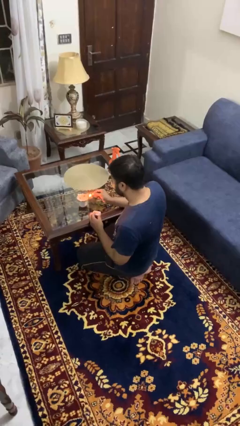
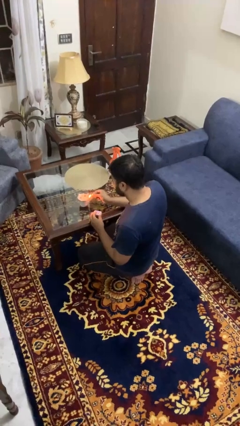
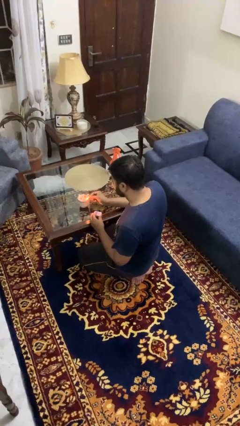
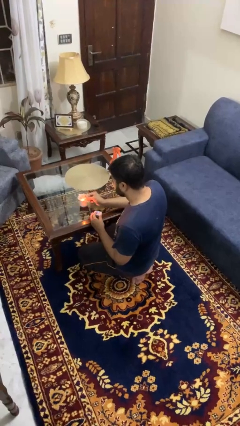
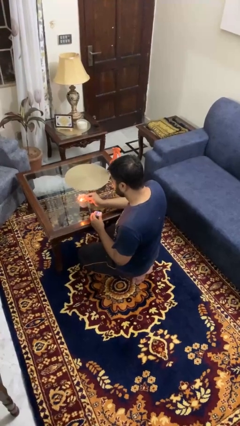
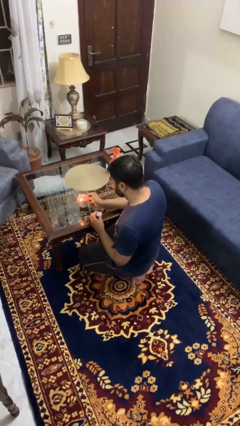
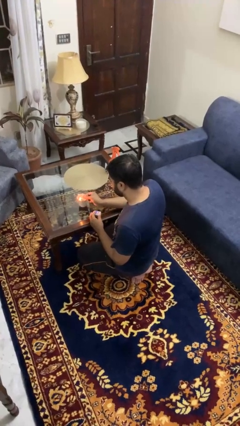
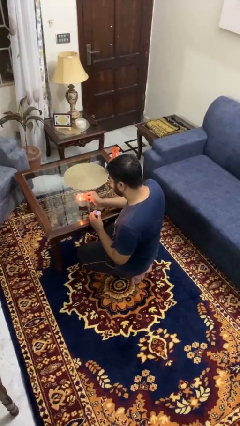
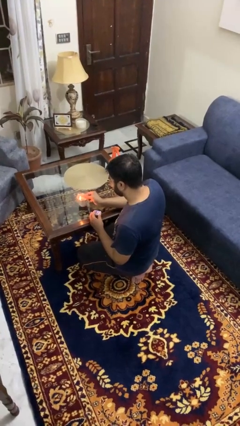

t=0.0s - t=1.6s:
person lights candle

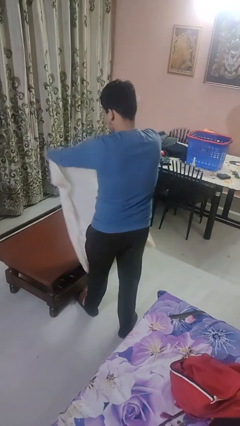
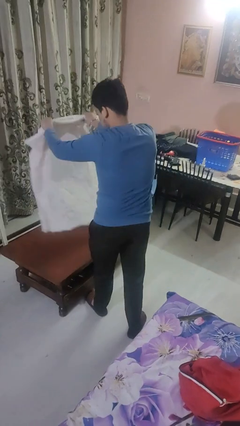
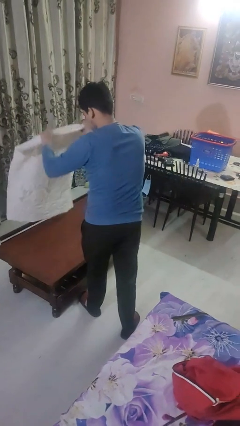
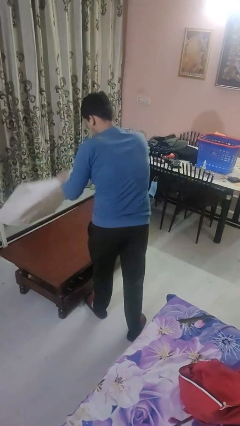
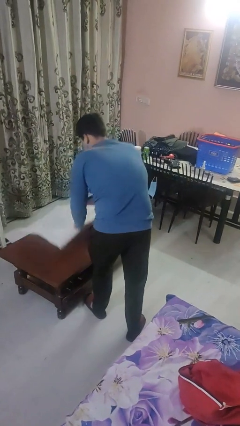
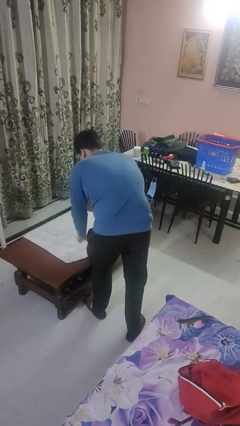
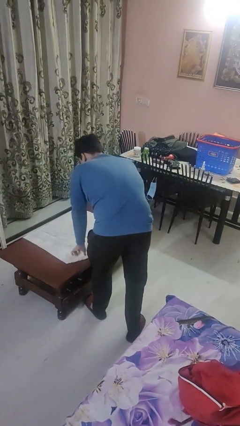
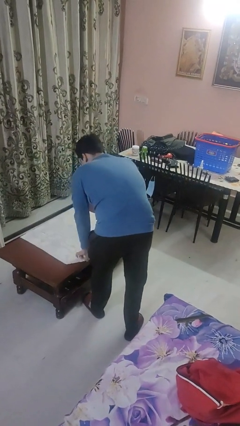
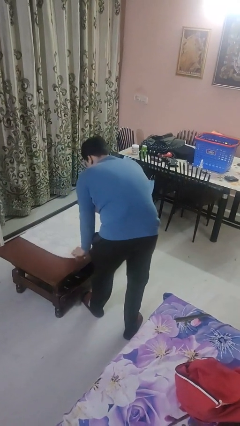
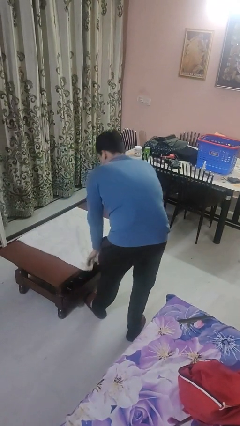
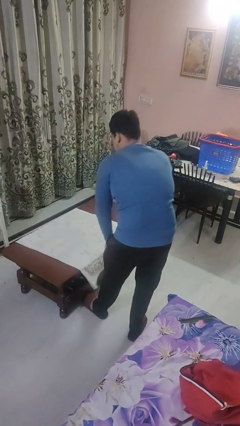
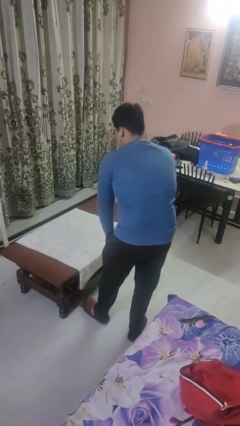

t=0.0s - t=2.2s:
person spreads tablecloth

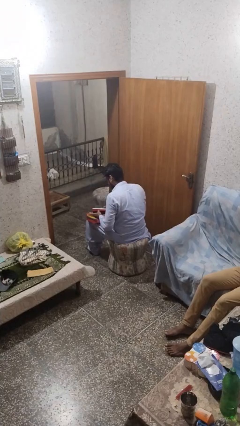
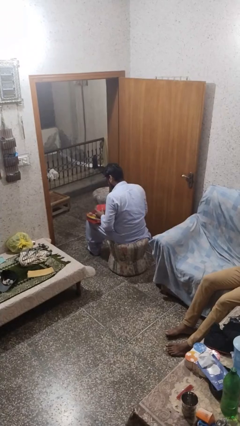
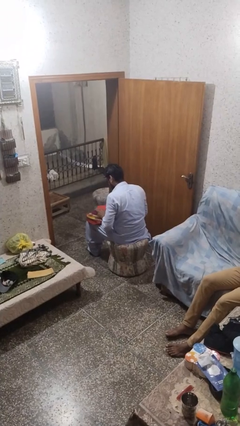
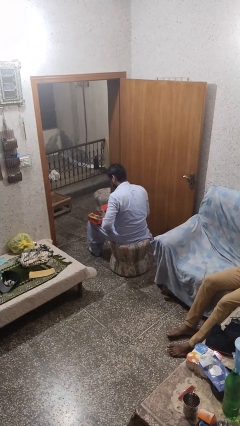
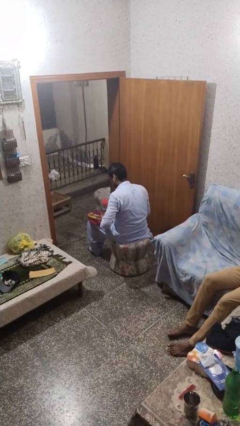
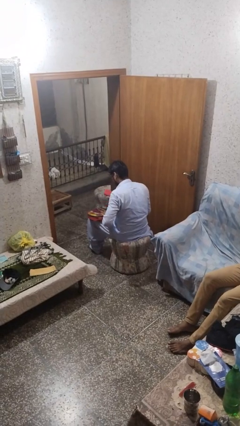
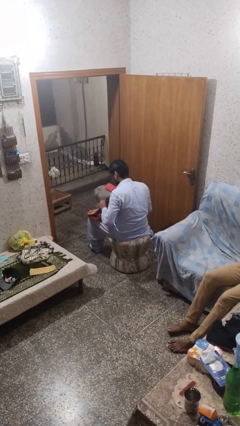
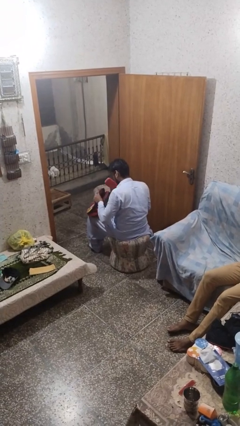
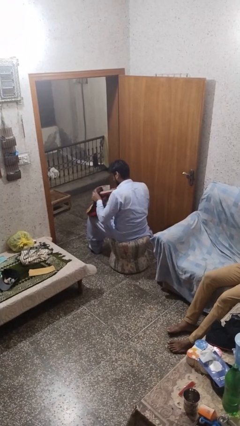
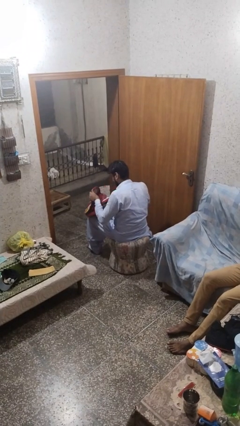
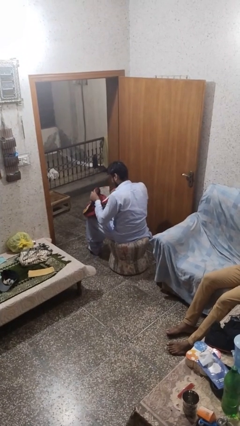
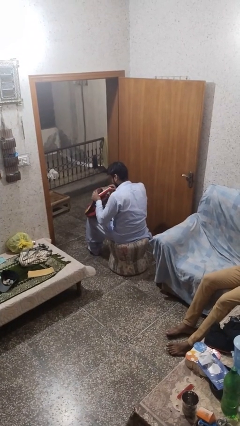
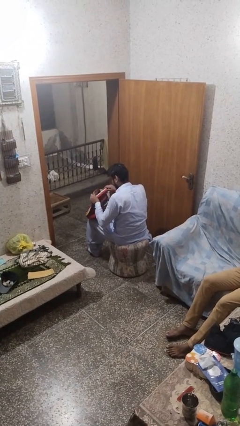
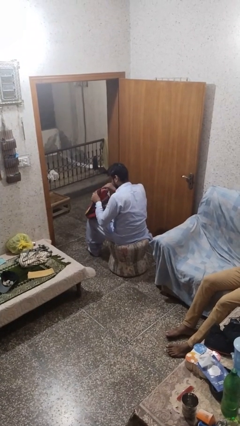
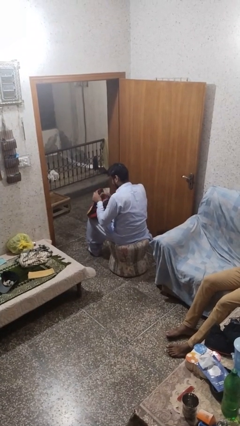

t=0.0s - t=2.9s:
person puts object into backpack

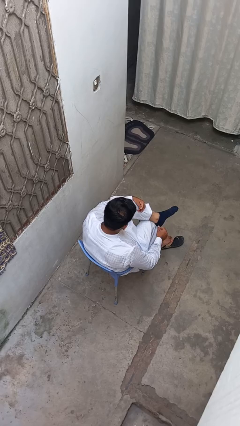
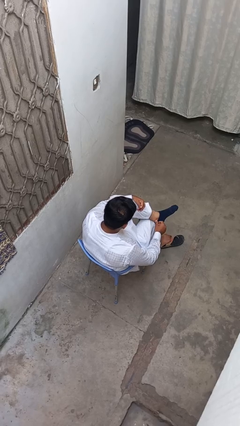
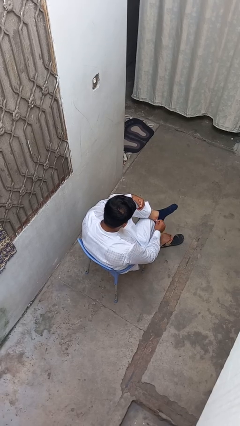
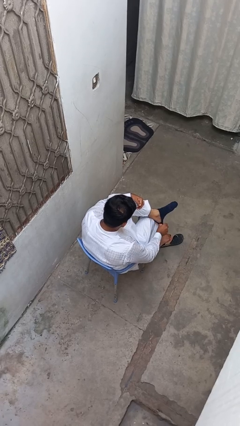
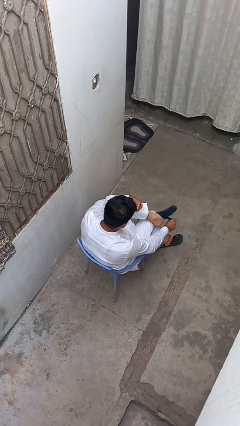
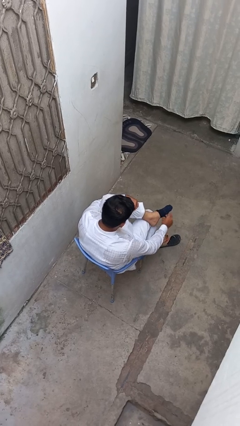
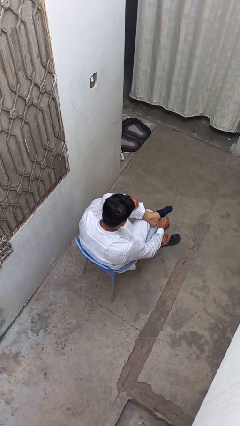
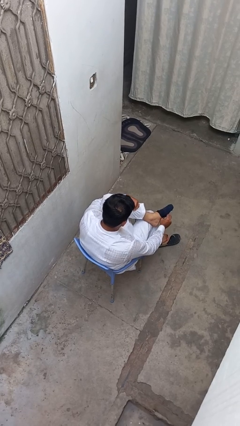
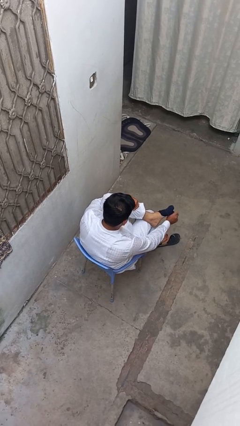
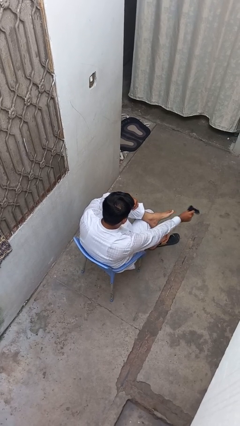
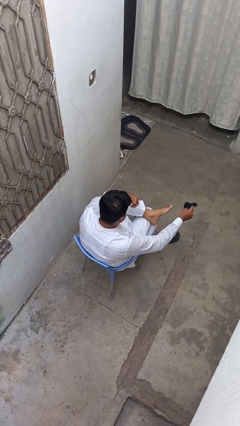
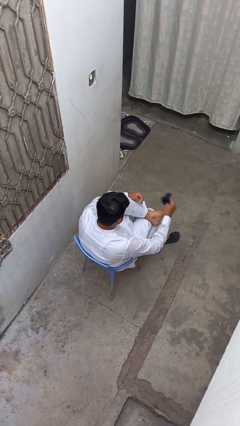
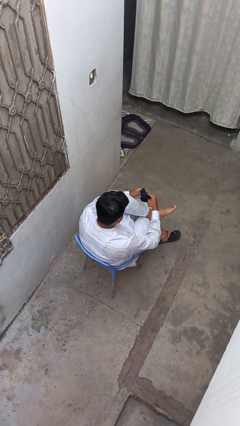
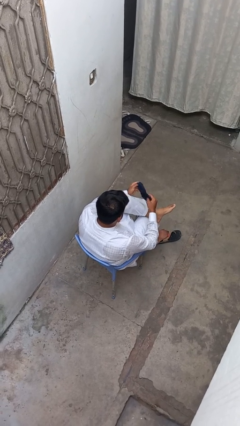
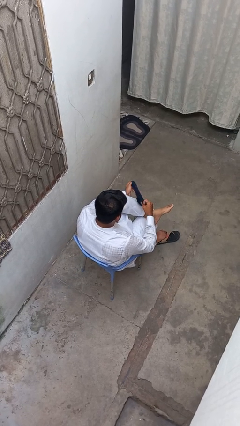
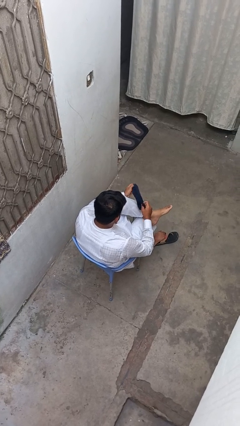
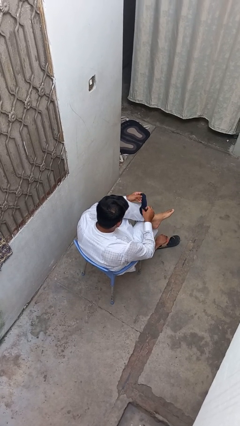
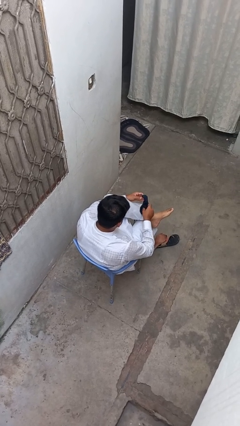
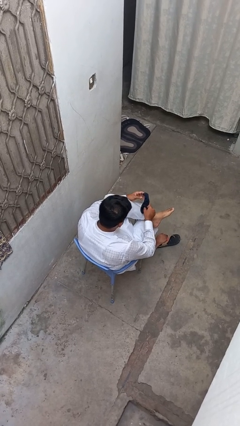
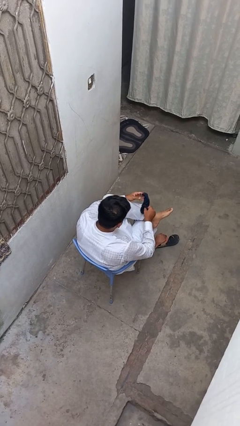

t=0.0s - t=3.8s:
person takes off socks

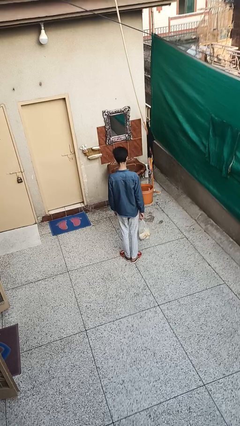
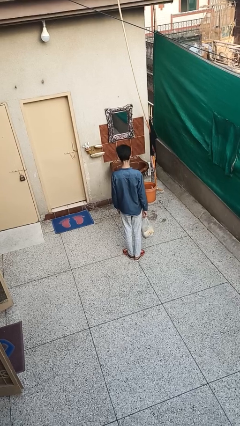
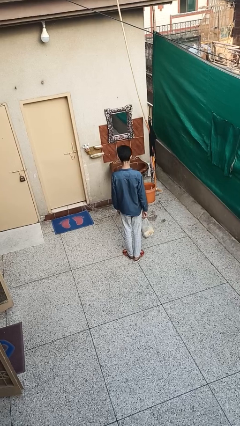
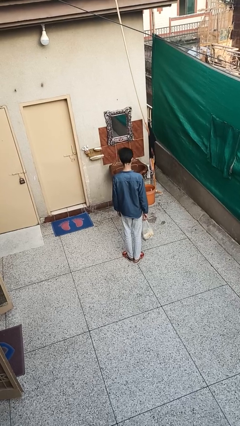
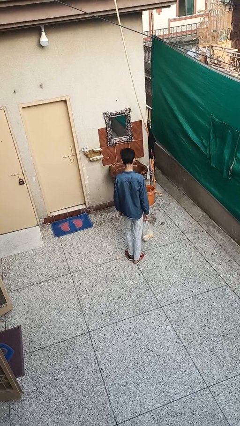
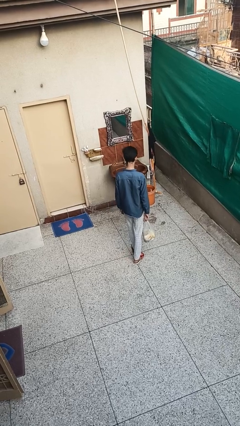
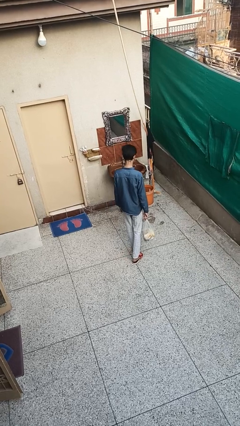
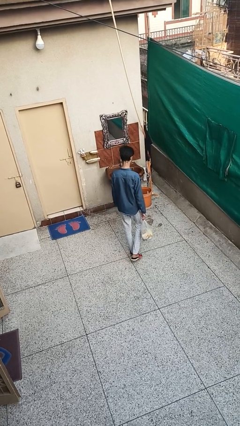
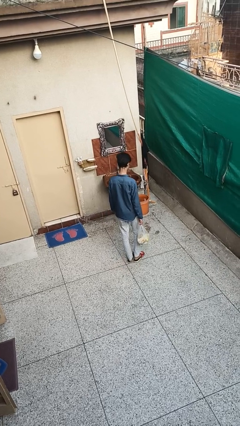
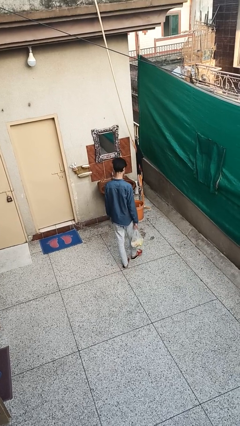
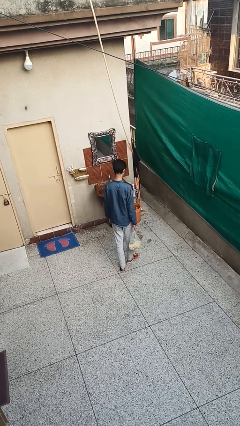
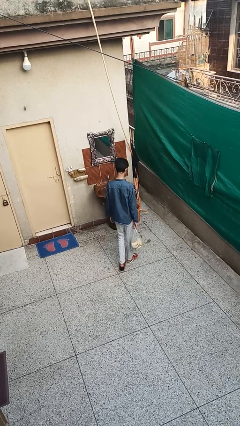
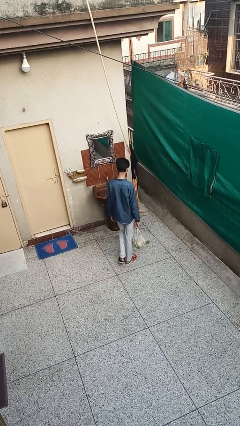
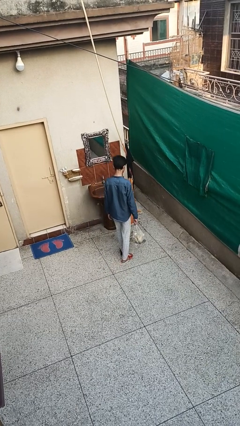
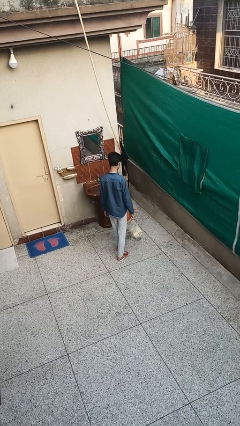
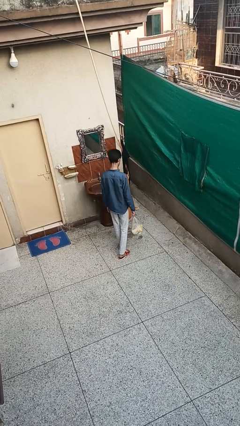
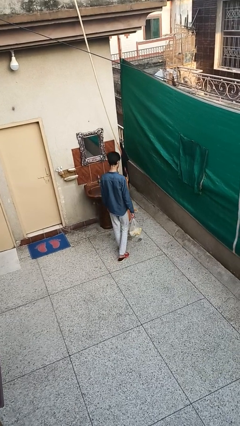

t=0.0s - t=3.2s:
person carries groceries

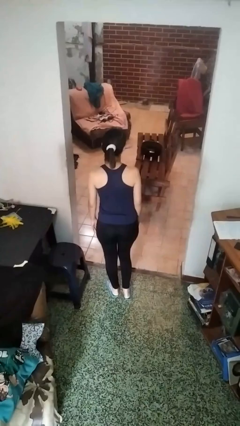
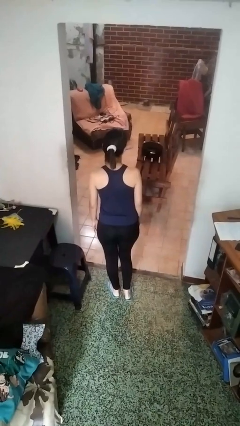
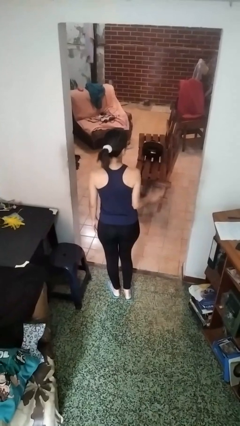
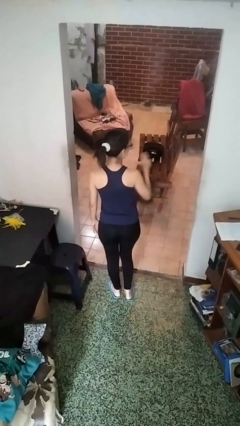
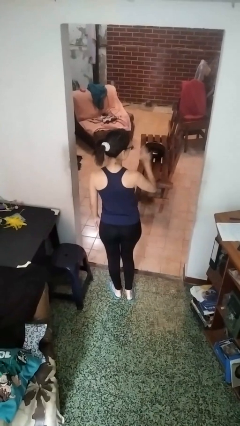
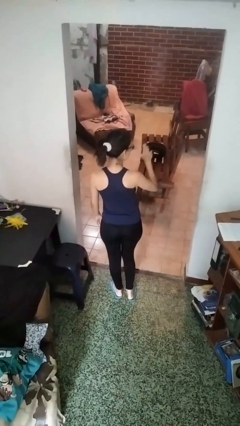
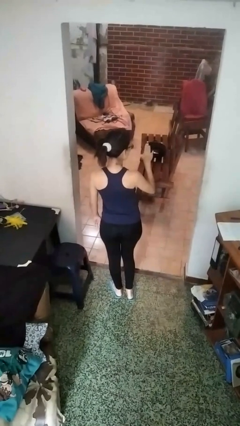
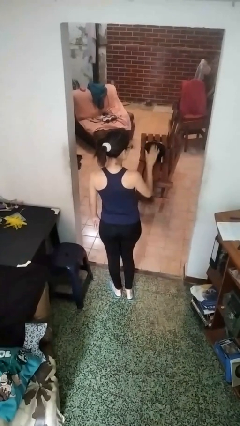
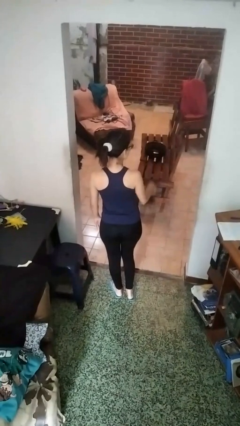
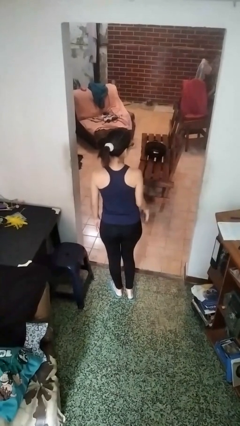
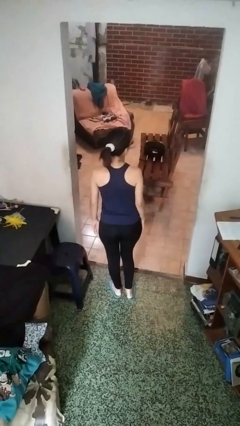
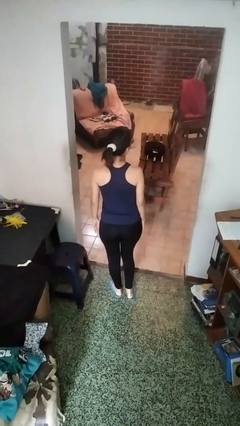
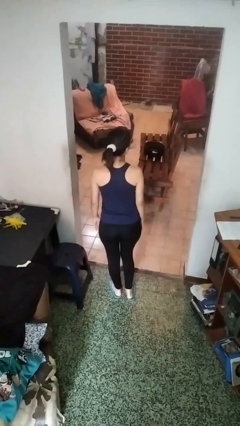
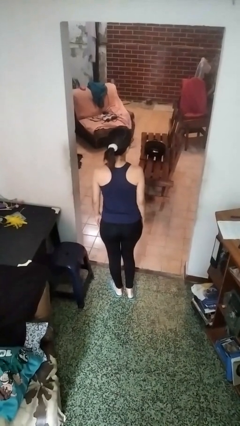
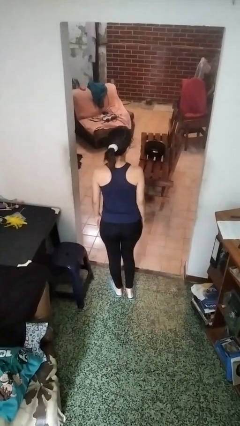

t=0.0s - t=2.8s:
person gestures stop

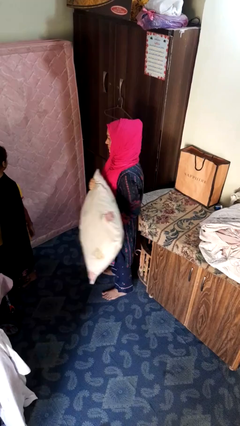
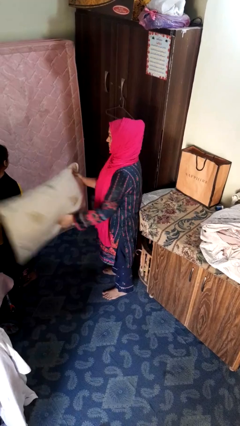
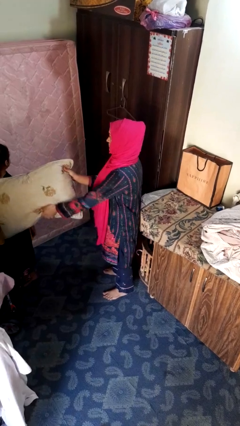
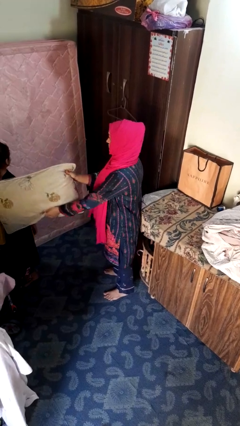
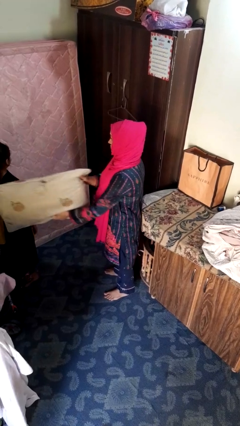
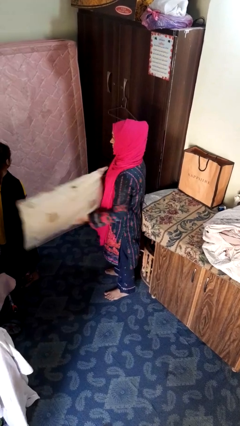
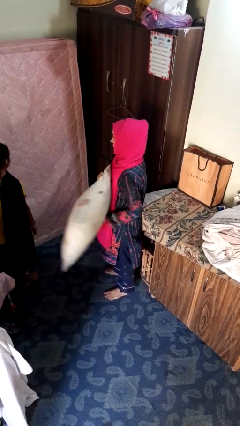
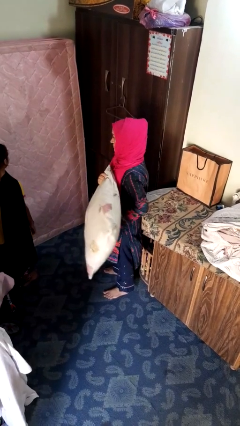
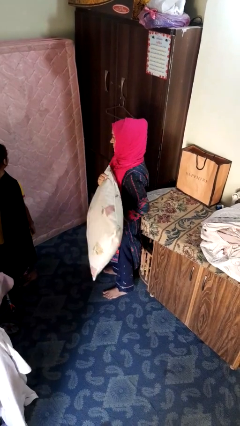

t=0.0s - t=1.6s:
person hits person with pillow
